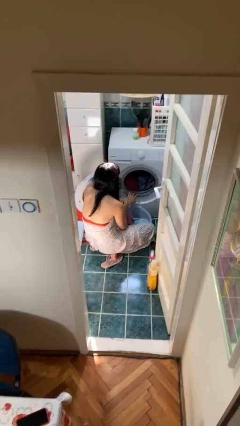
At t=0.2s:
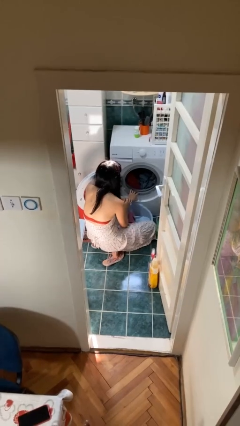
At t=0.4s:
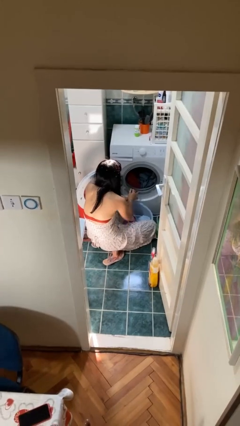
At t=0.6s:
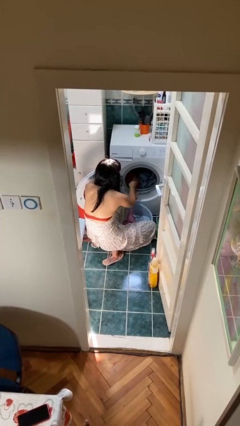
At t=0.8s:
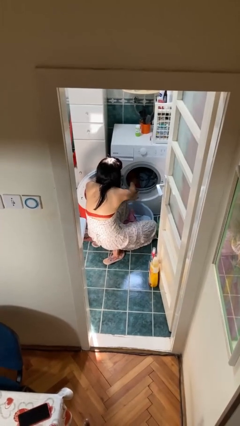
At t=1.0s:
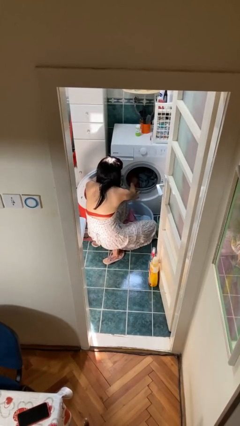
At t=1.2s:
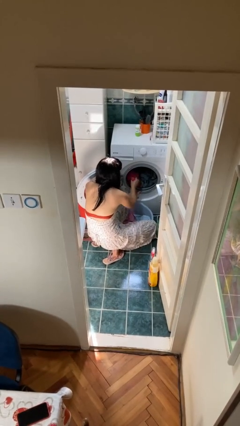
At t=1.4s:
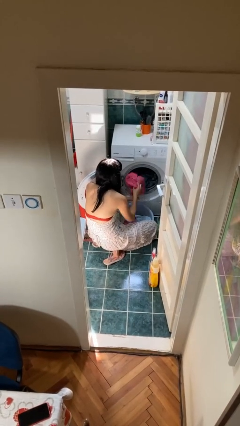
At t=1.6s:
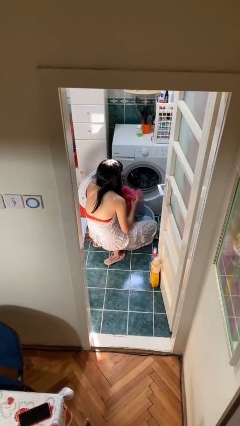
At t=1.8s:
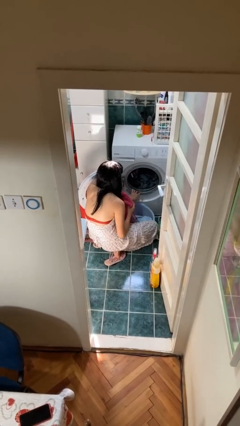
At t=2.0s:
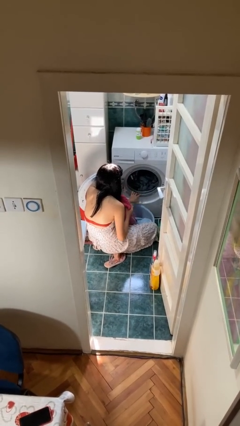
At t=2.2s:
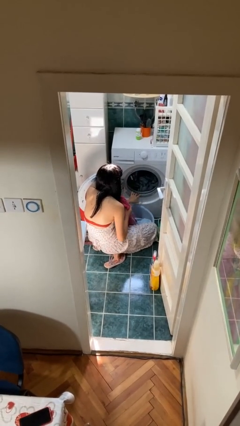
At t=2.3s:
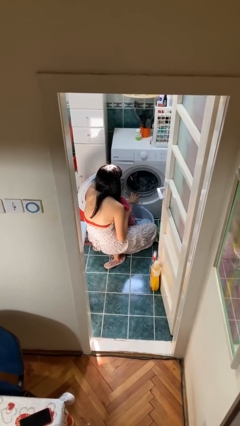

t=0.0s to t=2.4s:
person loads clotheswasher

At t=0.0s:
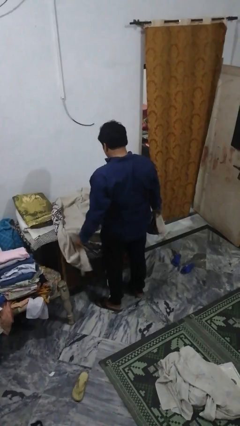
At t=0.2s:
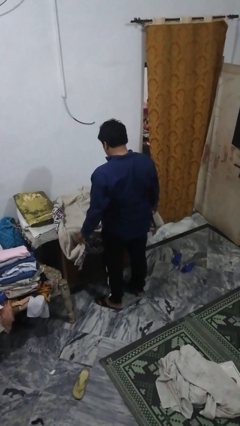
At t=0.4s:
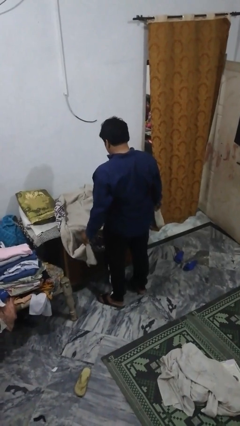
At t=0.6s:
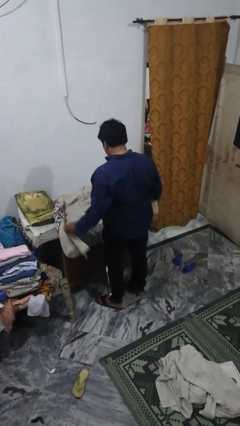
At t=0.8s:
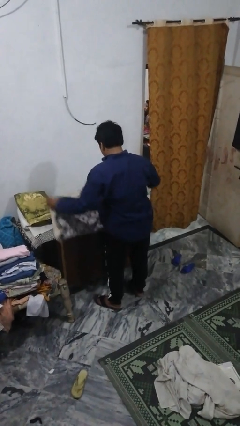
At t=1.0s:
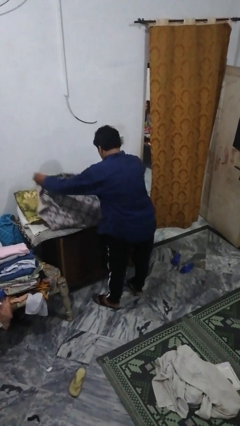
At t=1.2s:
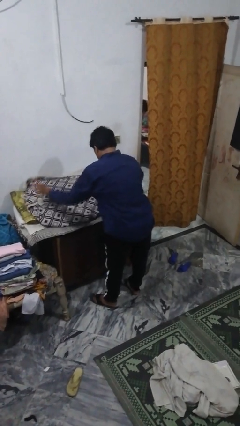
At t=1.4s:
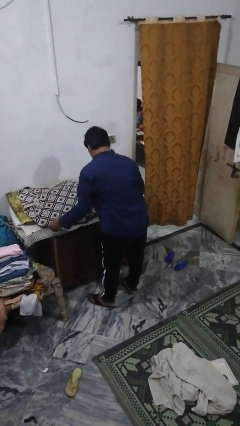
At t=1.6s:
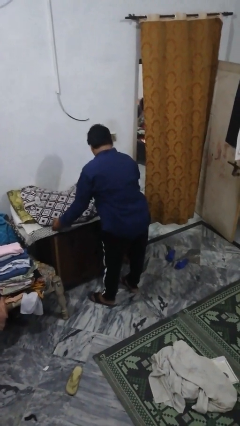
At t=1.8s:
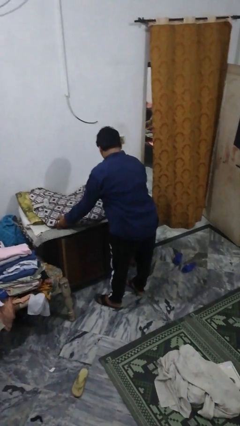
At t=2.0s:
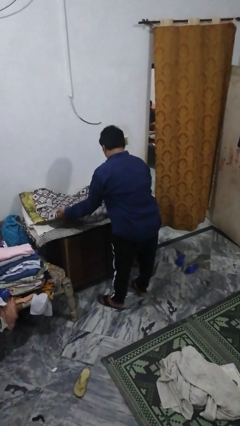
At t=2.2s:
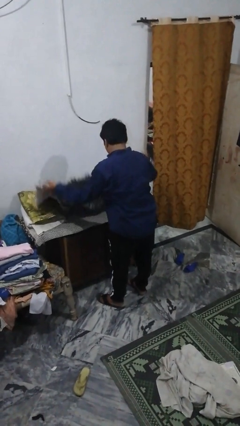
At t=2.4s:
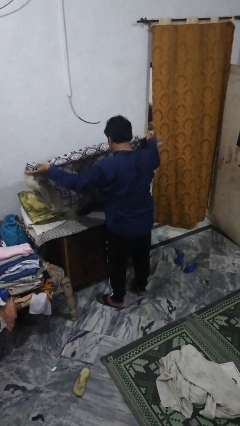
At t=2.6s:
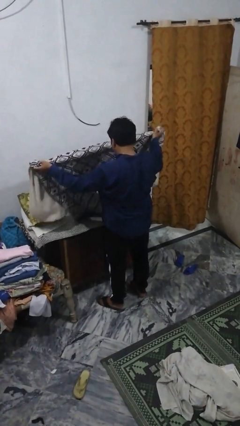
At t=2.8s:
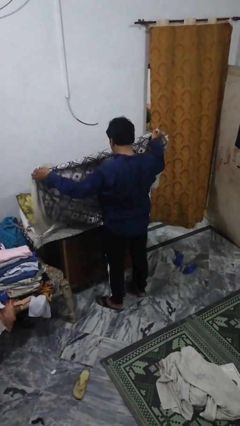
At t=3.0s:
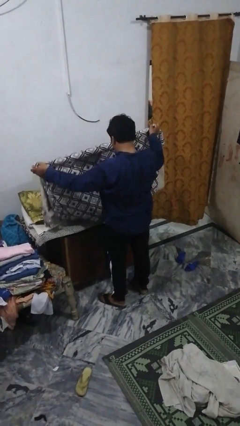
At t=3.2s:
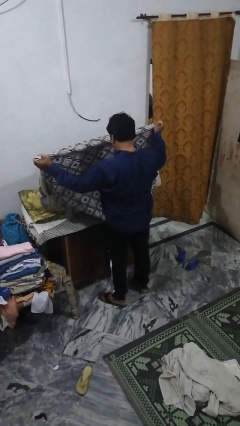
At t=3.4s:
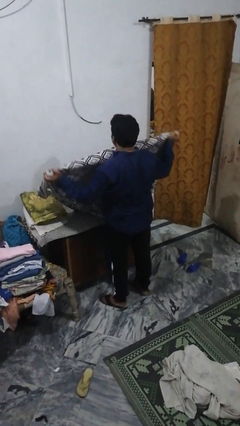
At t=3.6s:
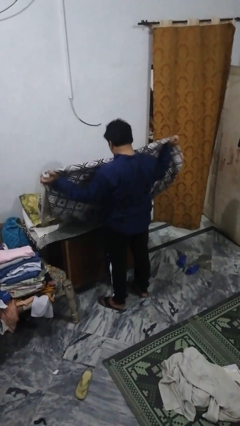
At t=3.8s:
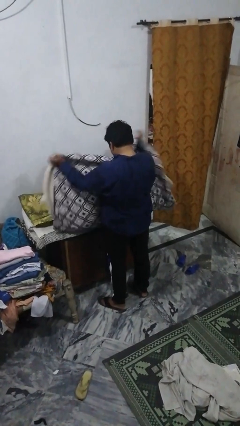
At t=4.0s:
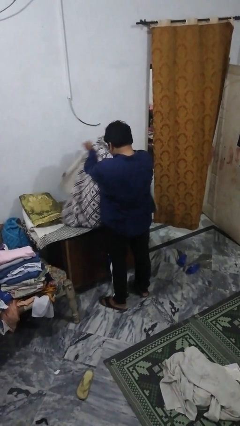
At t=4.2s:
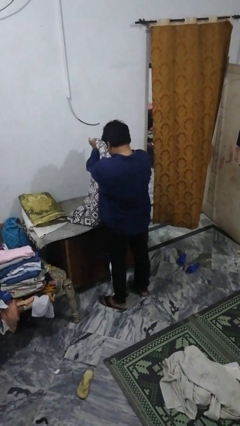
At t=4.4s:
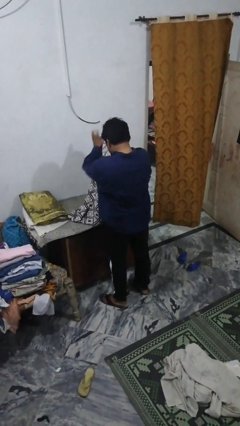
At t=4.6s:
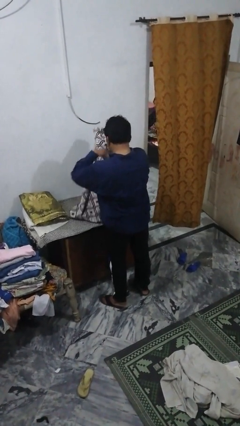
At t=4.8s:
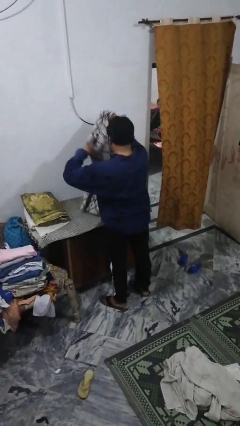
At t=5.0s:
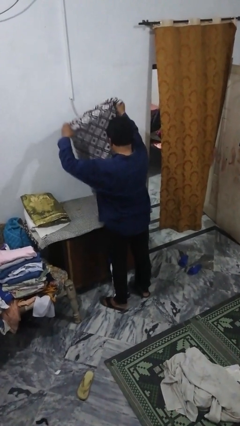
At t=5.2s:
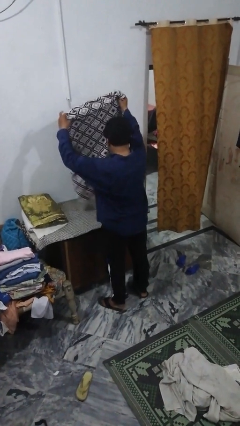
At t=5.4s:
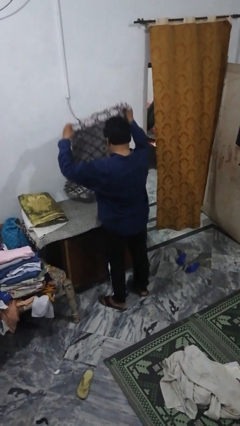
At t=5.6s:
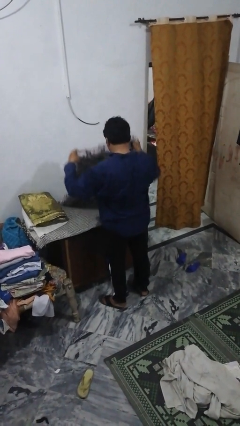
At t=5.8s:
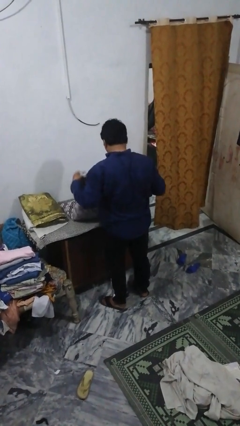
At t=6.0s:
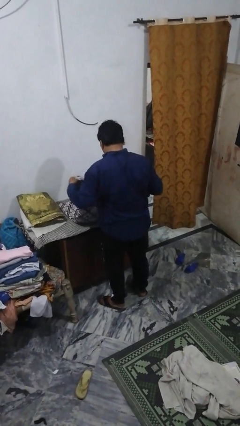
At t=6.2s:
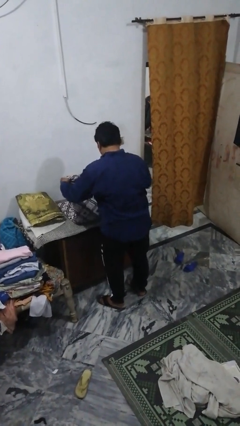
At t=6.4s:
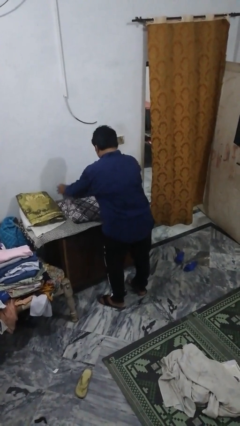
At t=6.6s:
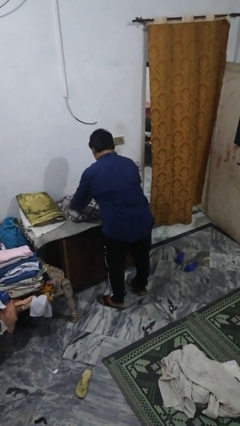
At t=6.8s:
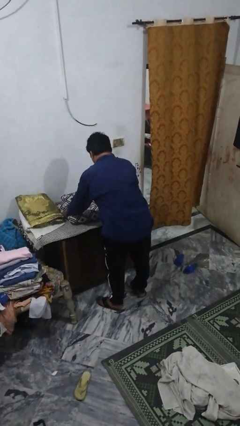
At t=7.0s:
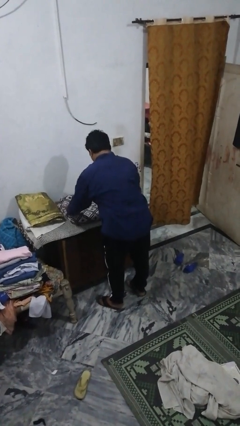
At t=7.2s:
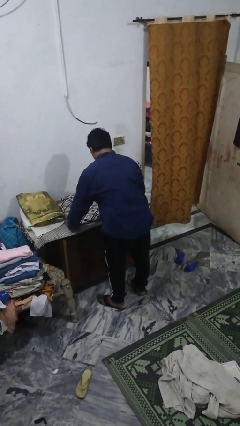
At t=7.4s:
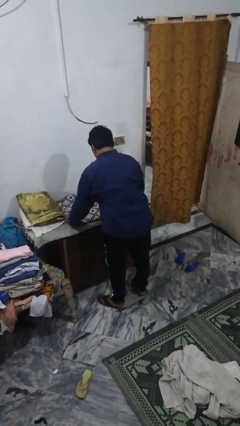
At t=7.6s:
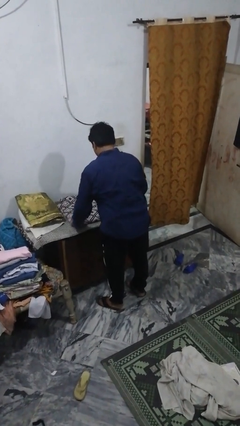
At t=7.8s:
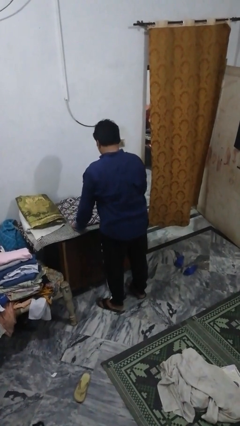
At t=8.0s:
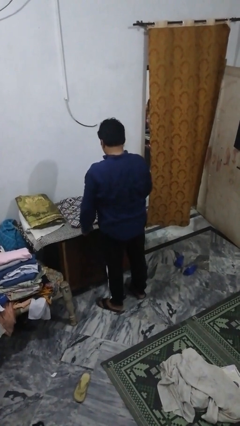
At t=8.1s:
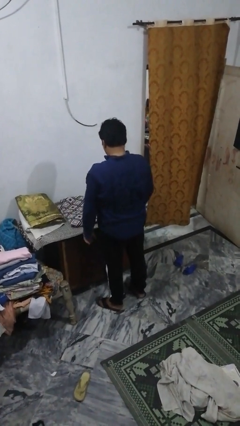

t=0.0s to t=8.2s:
person folds blanket

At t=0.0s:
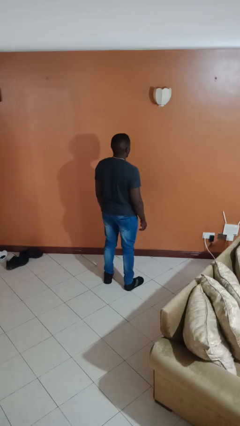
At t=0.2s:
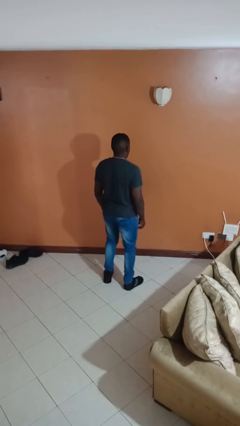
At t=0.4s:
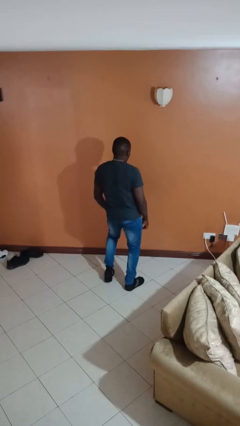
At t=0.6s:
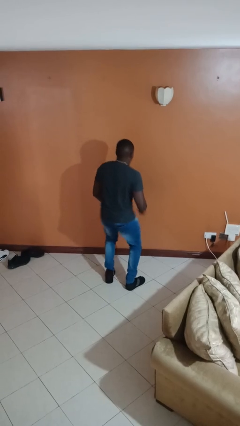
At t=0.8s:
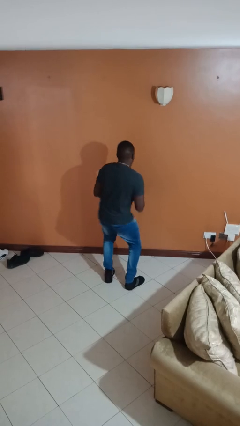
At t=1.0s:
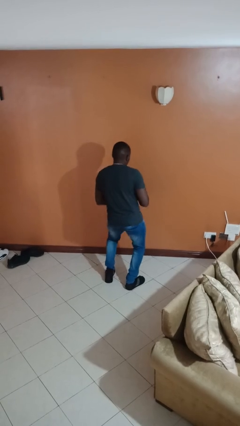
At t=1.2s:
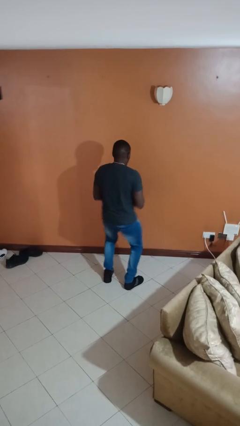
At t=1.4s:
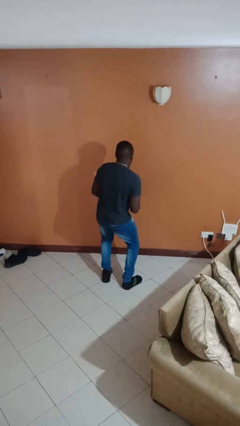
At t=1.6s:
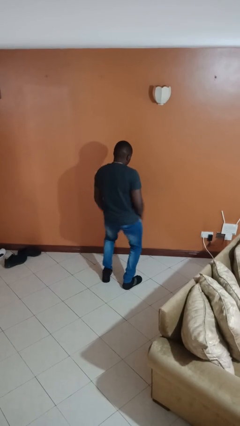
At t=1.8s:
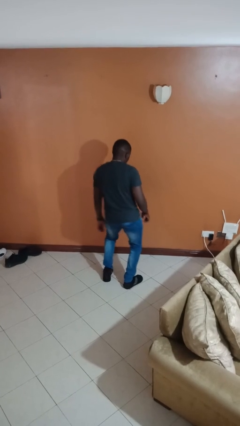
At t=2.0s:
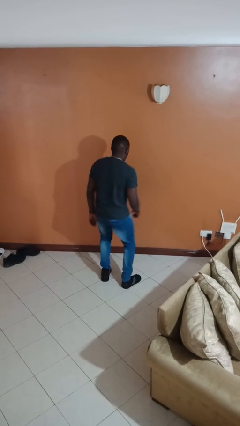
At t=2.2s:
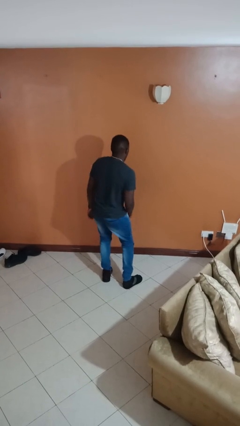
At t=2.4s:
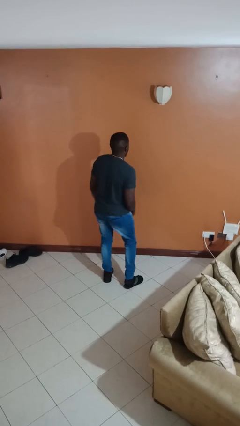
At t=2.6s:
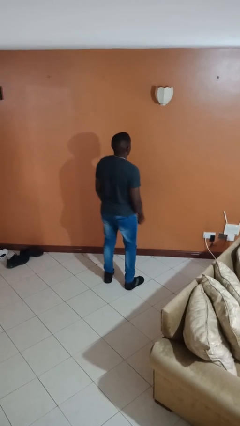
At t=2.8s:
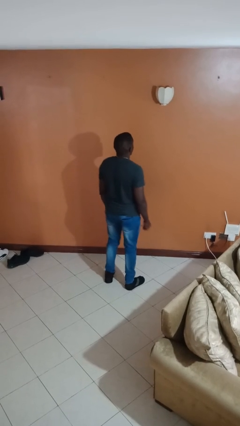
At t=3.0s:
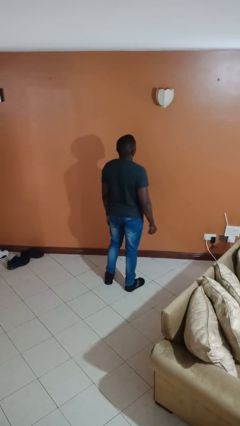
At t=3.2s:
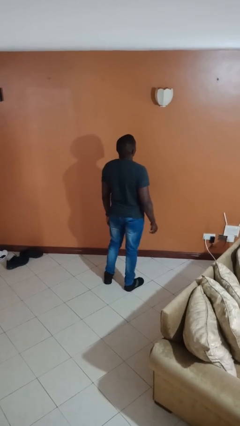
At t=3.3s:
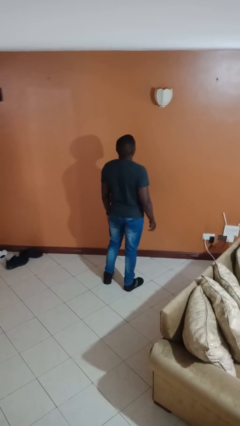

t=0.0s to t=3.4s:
person wiggles hips

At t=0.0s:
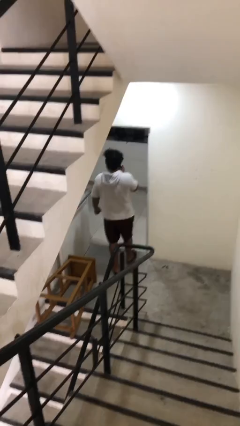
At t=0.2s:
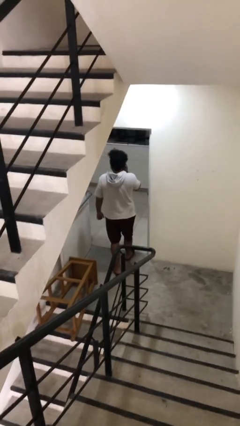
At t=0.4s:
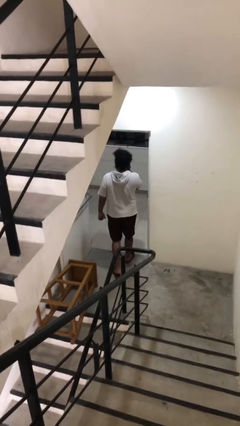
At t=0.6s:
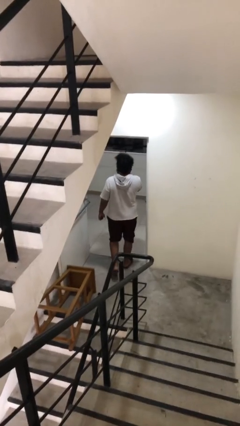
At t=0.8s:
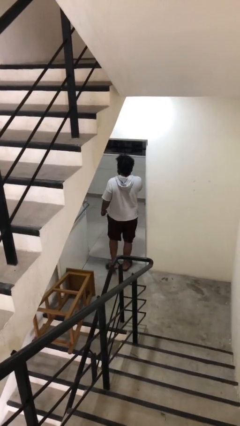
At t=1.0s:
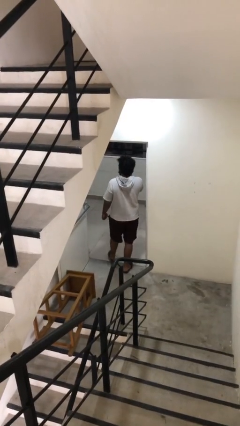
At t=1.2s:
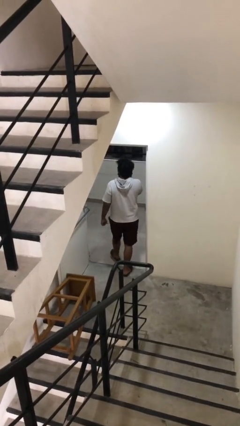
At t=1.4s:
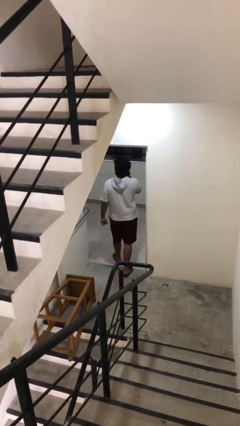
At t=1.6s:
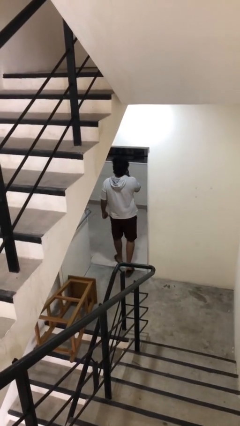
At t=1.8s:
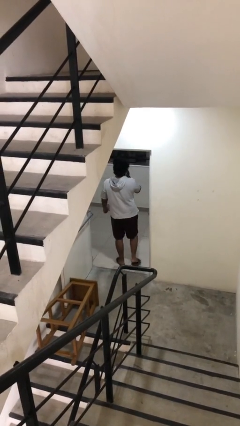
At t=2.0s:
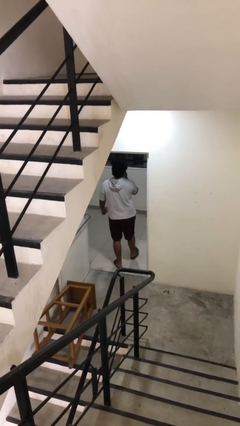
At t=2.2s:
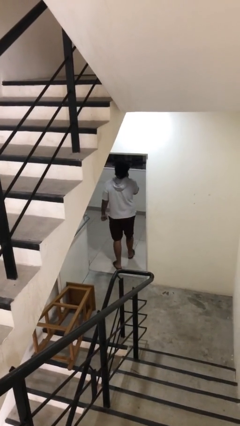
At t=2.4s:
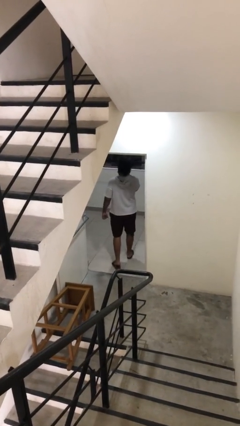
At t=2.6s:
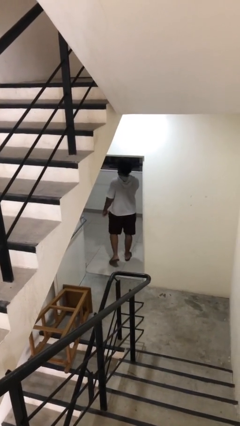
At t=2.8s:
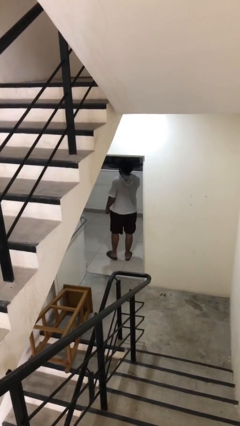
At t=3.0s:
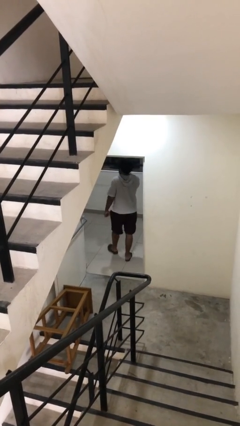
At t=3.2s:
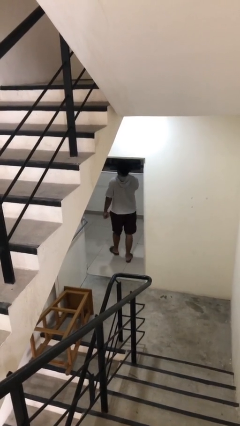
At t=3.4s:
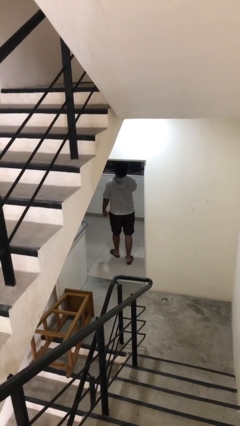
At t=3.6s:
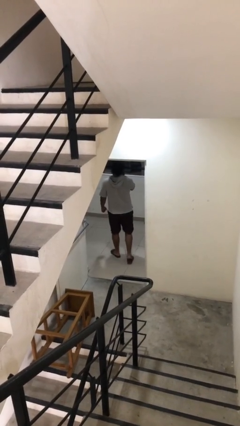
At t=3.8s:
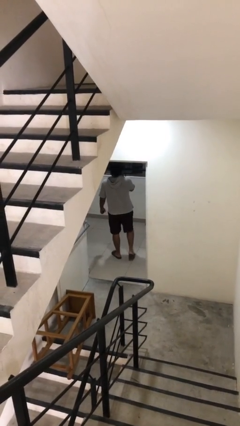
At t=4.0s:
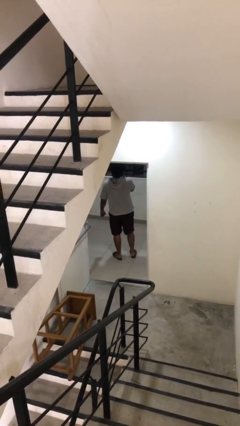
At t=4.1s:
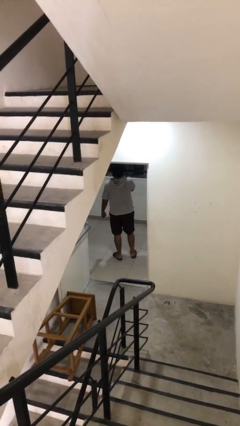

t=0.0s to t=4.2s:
person exits scene through structure
